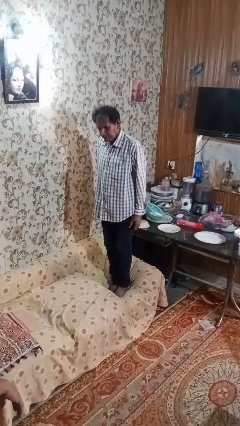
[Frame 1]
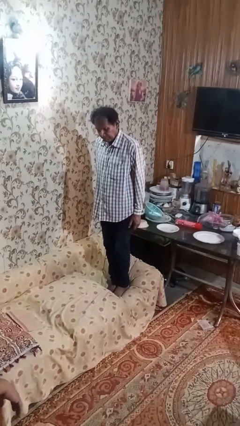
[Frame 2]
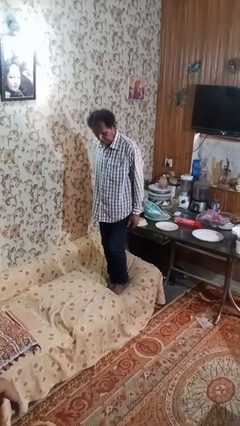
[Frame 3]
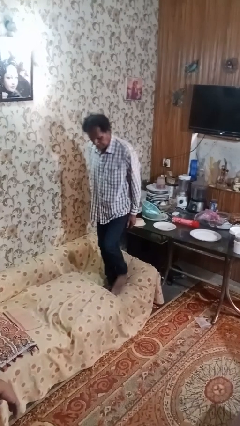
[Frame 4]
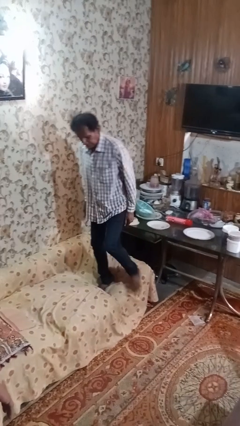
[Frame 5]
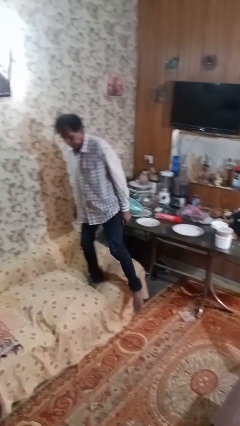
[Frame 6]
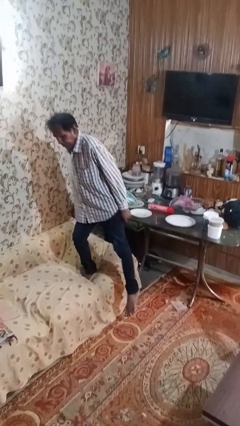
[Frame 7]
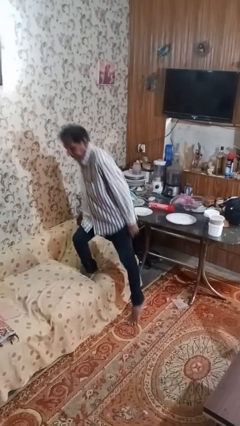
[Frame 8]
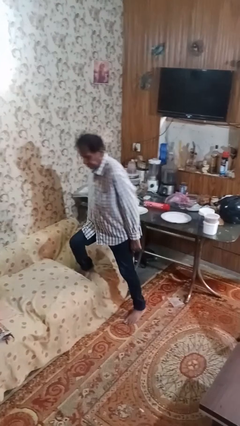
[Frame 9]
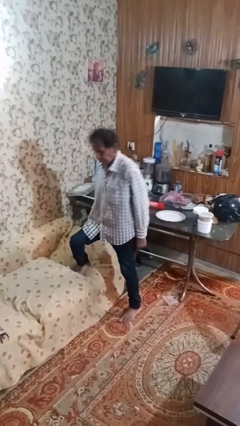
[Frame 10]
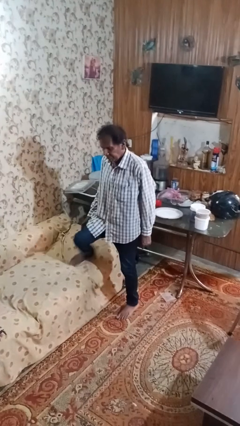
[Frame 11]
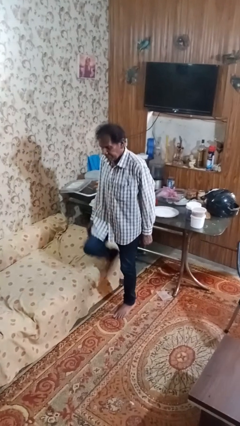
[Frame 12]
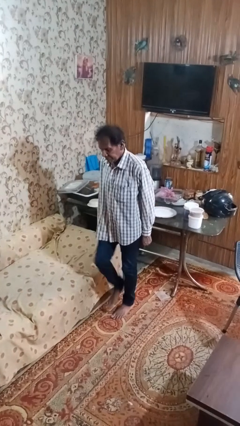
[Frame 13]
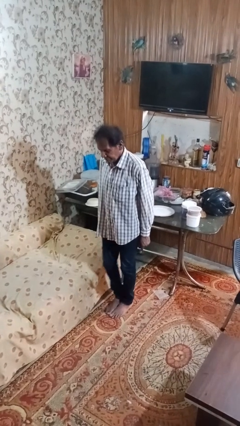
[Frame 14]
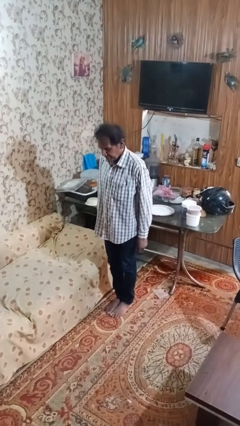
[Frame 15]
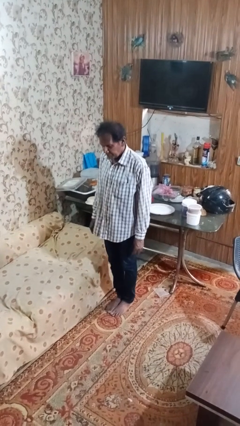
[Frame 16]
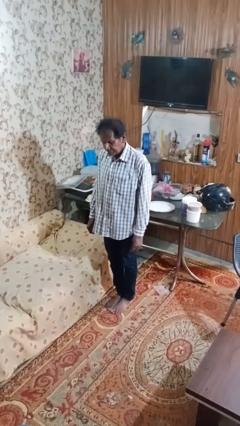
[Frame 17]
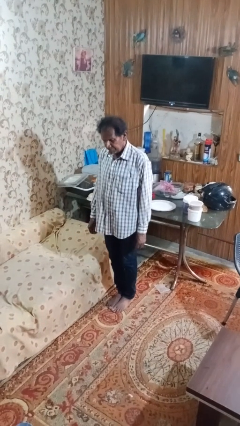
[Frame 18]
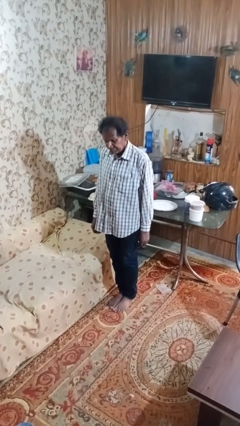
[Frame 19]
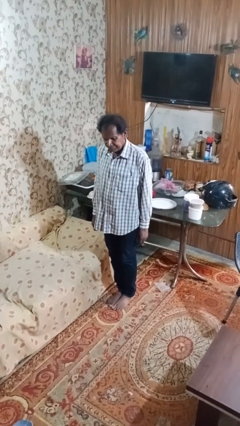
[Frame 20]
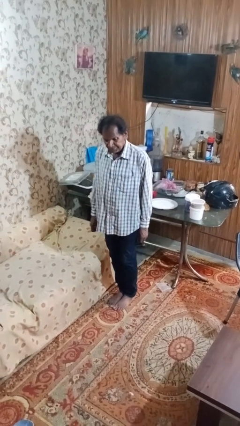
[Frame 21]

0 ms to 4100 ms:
person climbs off couch

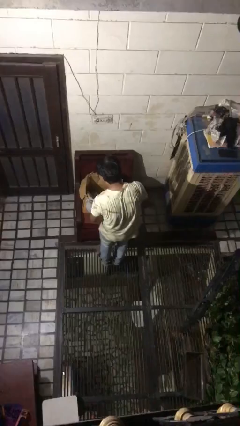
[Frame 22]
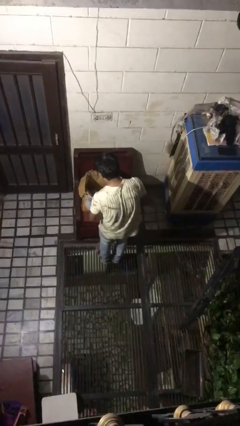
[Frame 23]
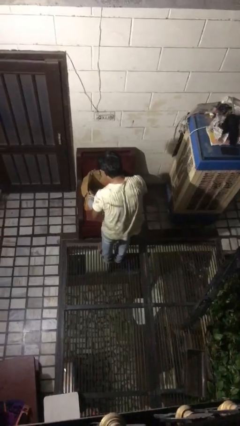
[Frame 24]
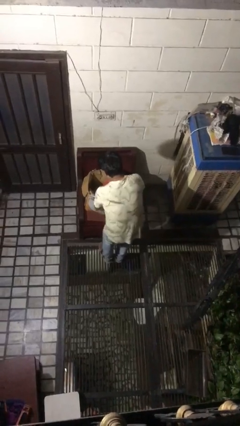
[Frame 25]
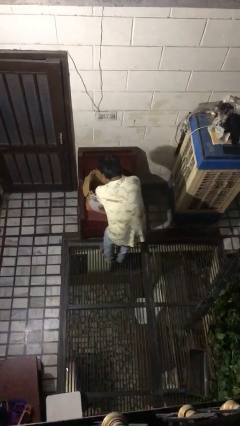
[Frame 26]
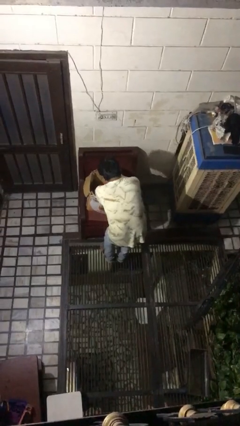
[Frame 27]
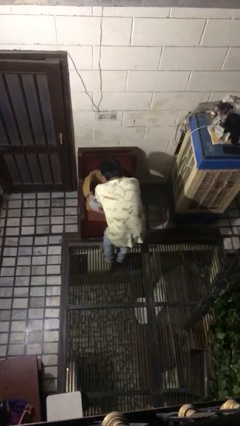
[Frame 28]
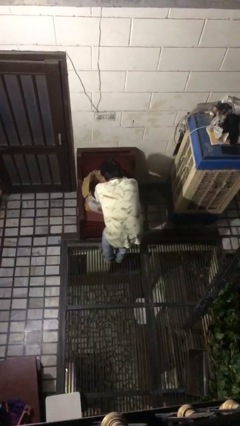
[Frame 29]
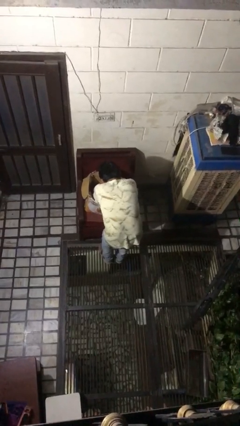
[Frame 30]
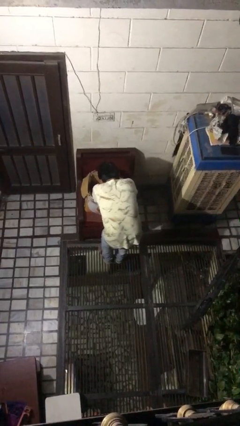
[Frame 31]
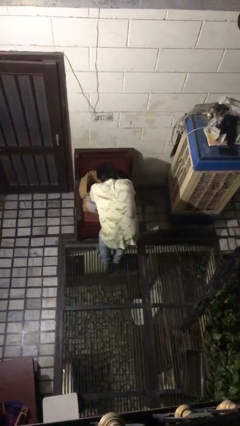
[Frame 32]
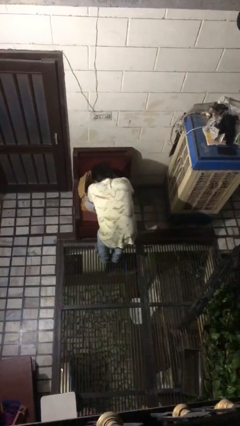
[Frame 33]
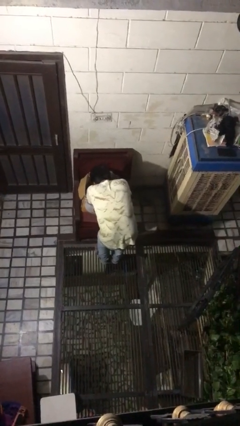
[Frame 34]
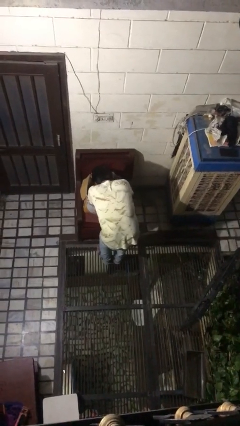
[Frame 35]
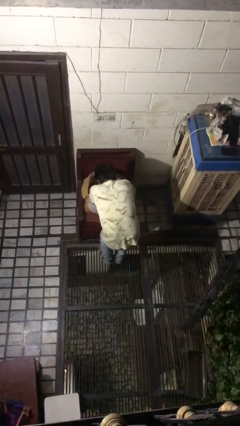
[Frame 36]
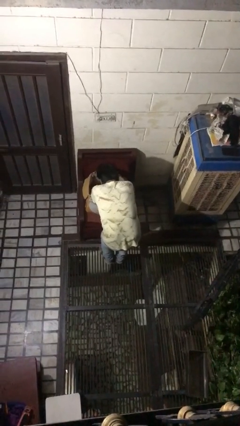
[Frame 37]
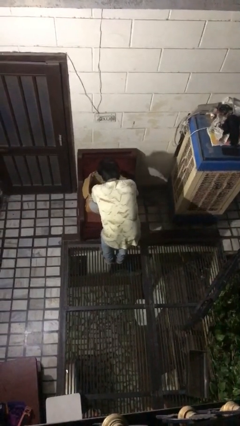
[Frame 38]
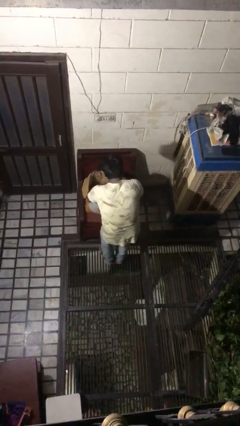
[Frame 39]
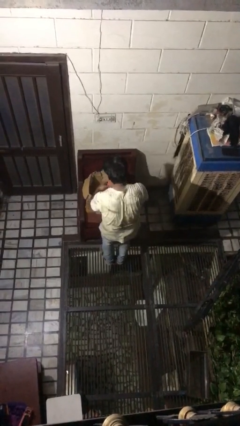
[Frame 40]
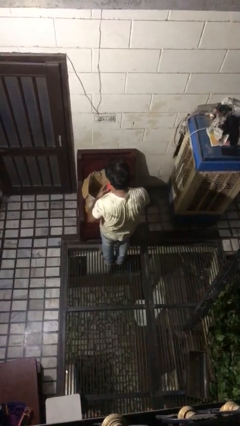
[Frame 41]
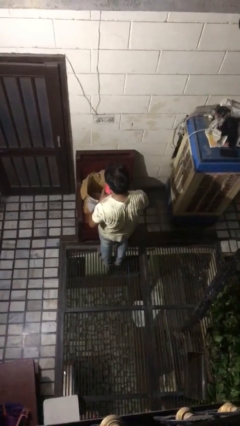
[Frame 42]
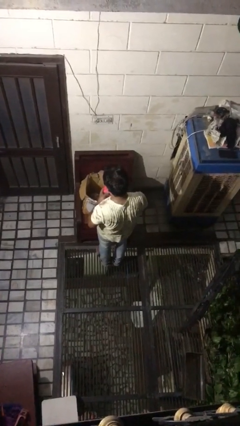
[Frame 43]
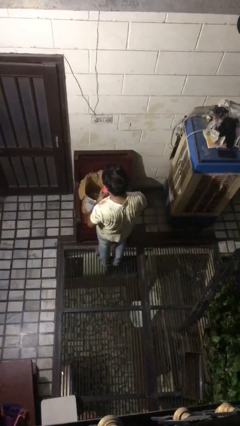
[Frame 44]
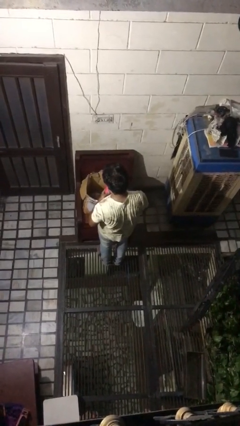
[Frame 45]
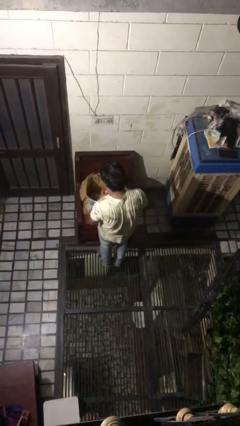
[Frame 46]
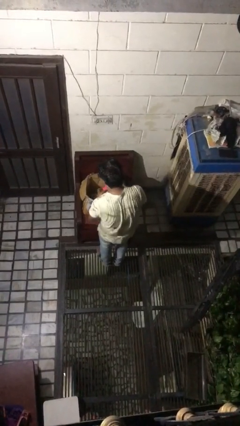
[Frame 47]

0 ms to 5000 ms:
person searches in box

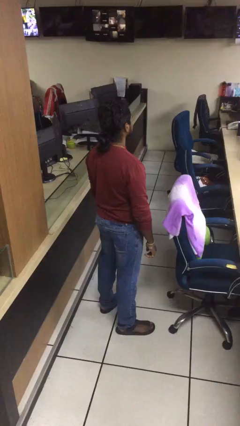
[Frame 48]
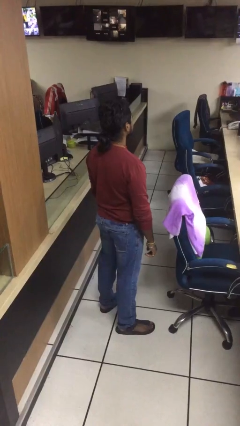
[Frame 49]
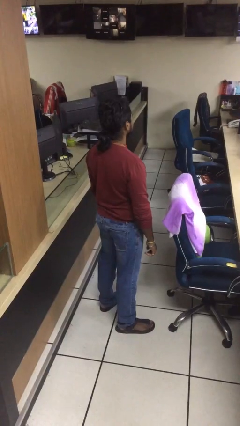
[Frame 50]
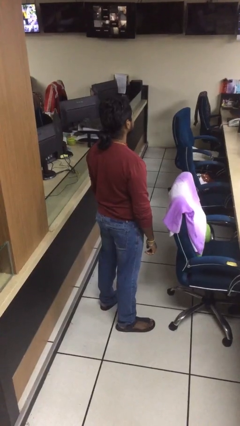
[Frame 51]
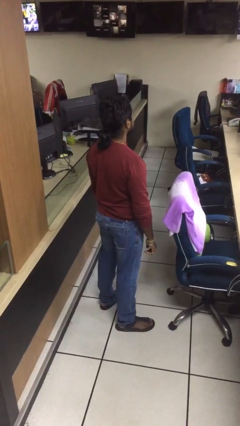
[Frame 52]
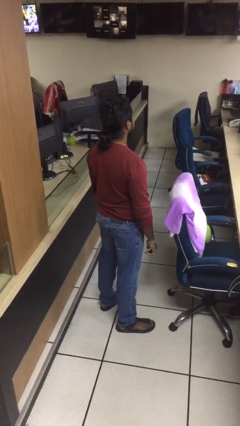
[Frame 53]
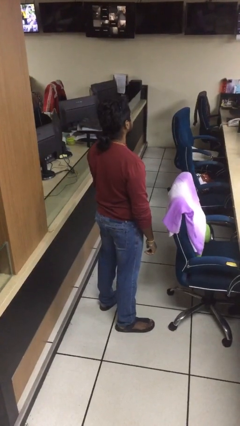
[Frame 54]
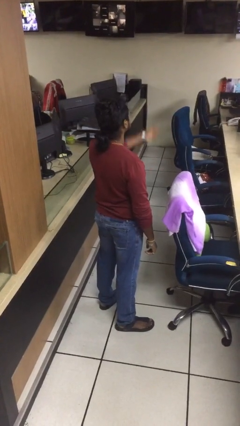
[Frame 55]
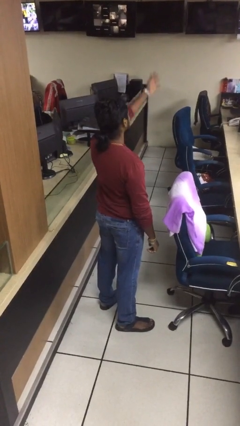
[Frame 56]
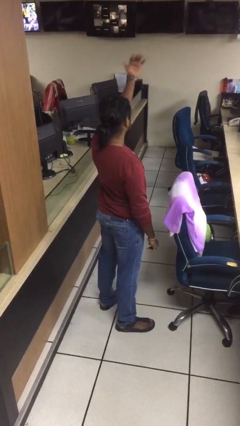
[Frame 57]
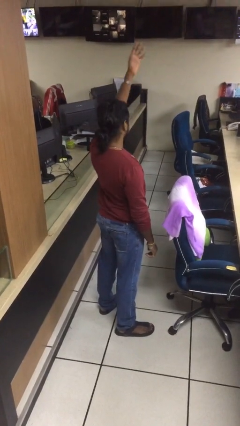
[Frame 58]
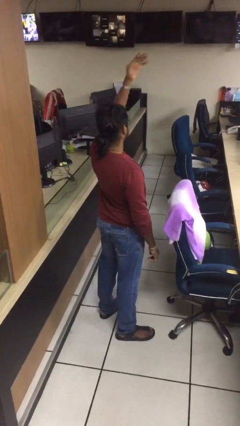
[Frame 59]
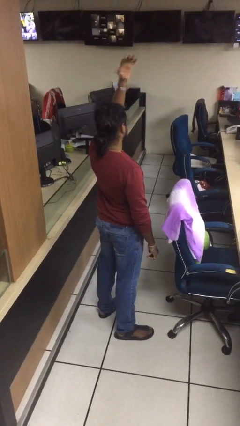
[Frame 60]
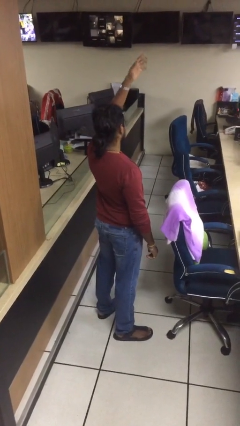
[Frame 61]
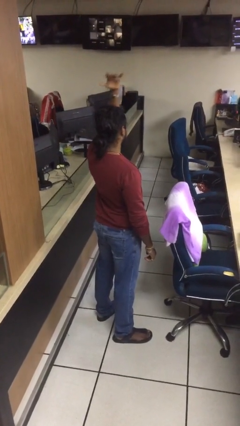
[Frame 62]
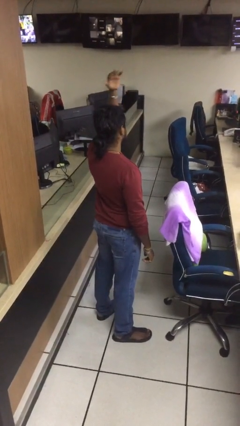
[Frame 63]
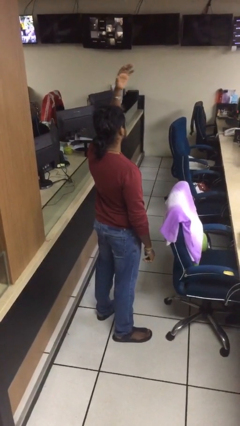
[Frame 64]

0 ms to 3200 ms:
person gestures come here

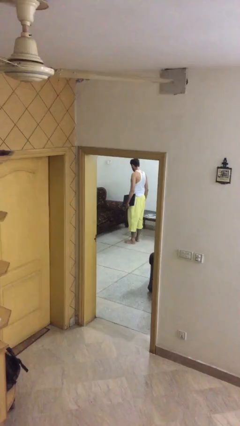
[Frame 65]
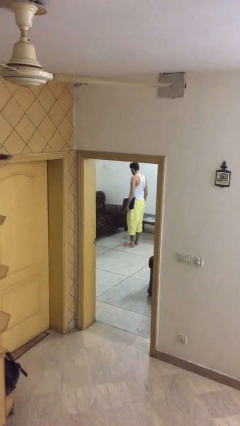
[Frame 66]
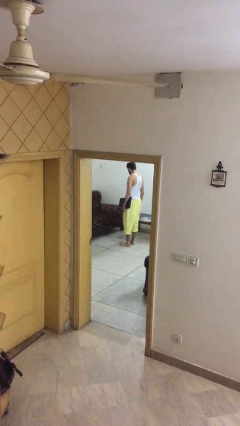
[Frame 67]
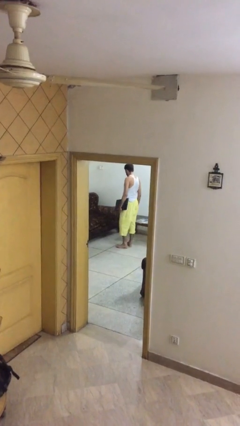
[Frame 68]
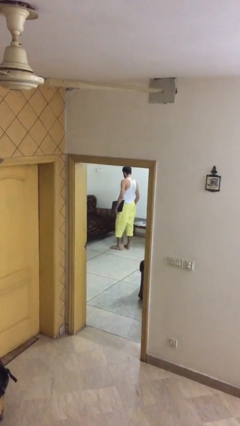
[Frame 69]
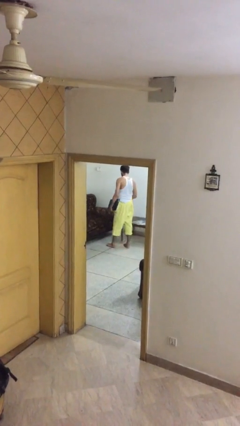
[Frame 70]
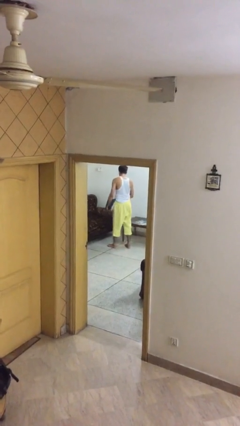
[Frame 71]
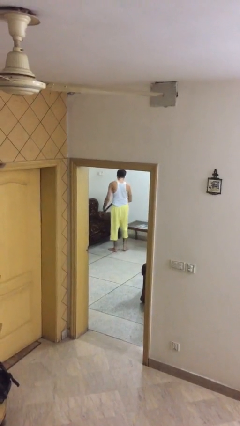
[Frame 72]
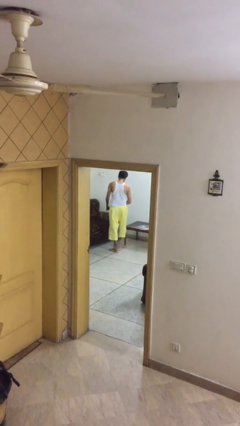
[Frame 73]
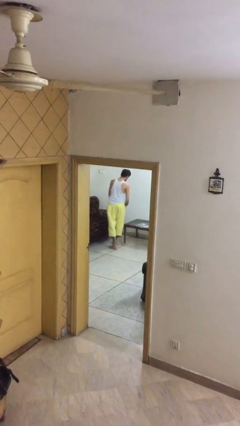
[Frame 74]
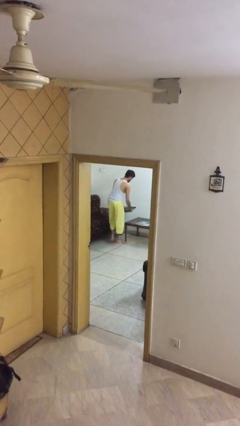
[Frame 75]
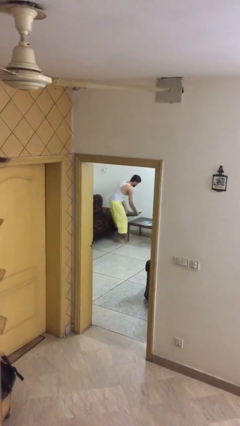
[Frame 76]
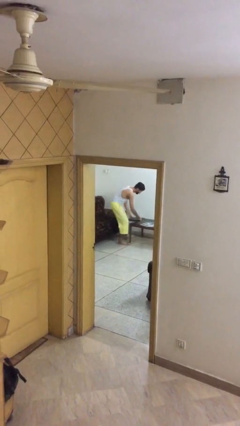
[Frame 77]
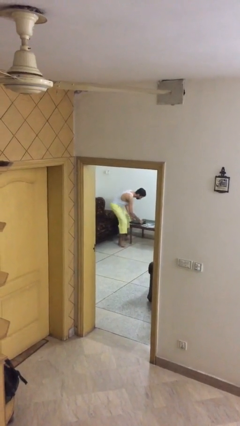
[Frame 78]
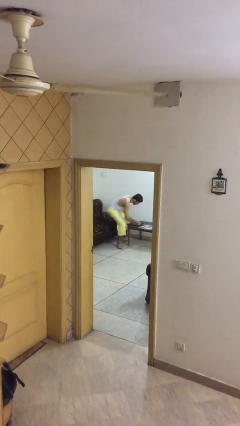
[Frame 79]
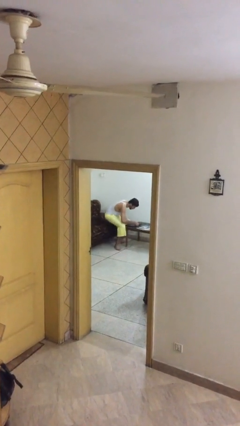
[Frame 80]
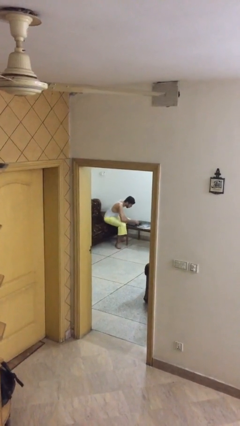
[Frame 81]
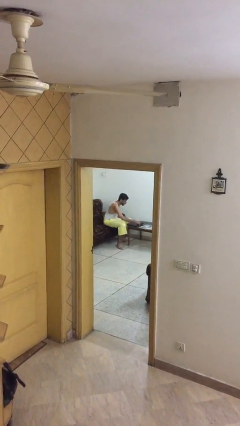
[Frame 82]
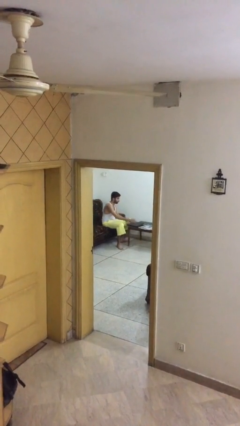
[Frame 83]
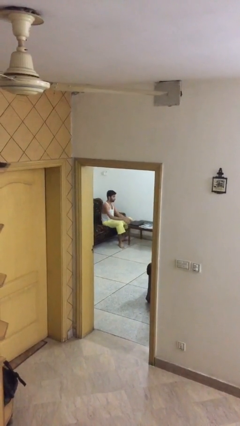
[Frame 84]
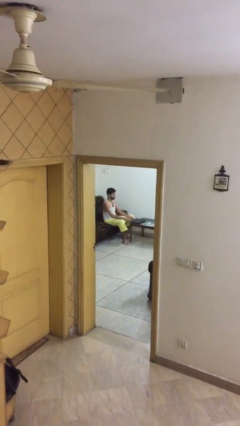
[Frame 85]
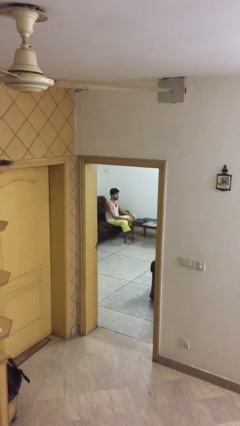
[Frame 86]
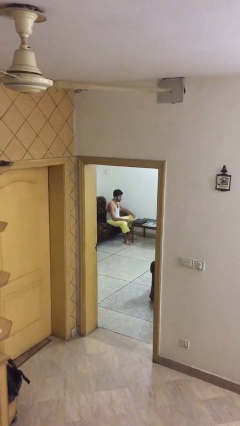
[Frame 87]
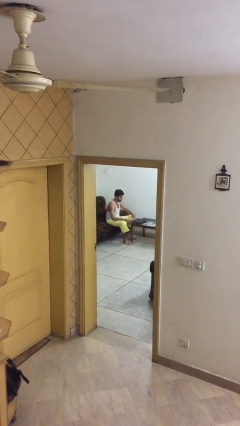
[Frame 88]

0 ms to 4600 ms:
person sits down

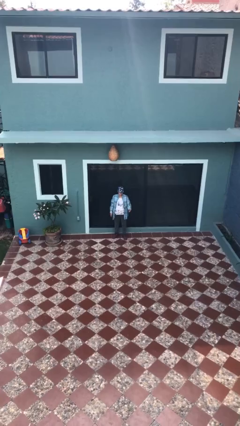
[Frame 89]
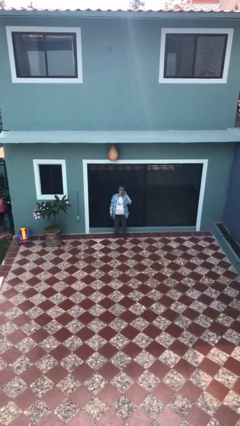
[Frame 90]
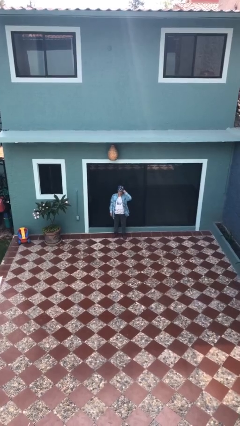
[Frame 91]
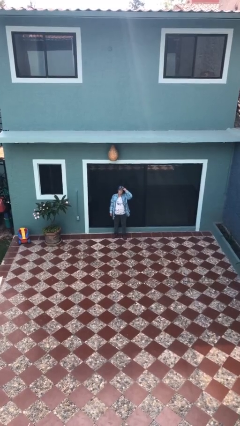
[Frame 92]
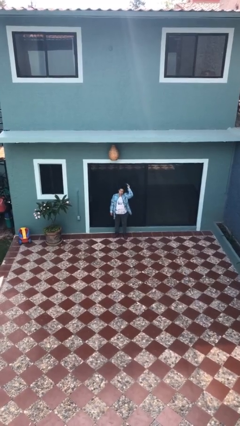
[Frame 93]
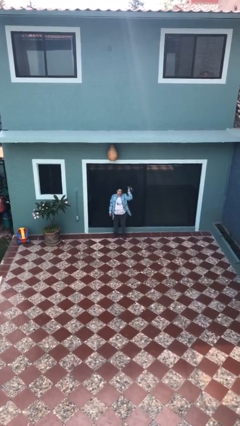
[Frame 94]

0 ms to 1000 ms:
person takes off hat
